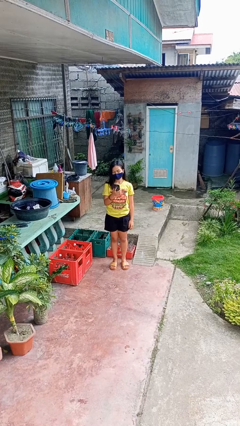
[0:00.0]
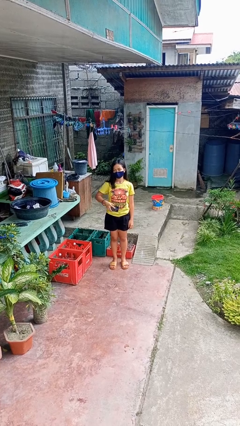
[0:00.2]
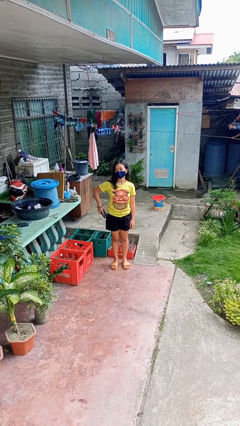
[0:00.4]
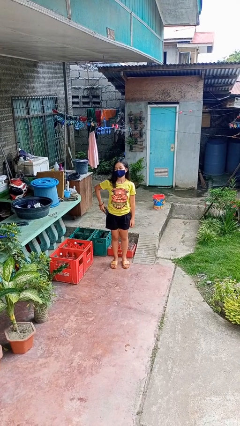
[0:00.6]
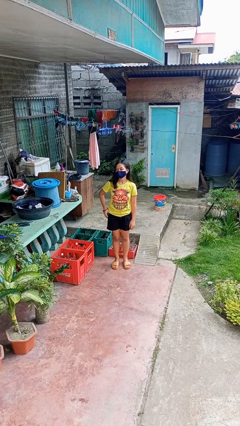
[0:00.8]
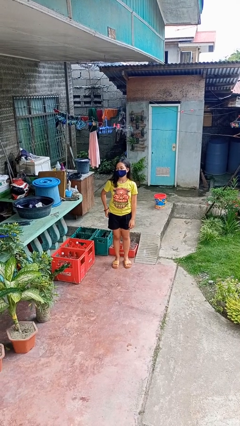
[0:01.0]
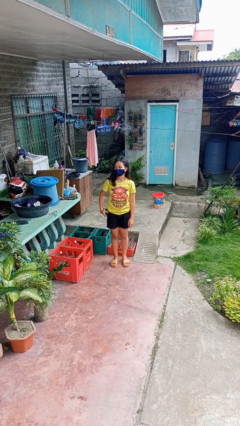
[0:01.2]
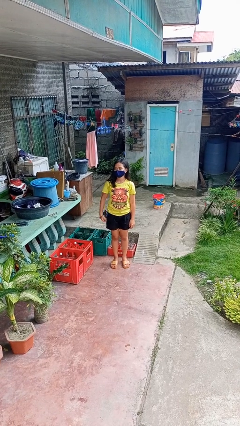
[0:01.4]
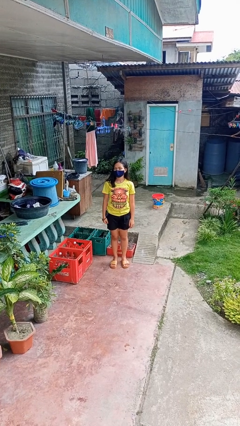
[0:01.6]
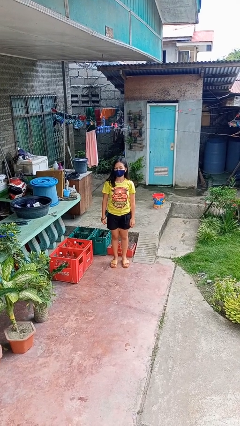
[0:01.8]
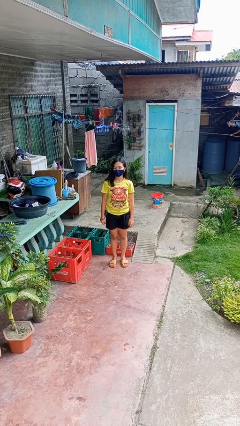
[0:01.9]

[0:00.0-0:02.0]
person puts phone into pocket

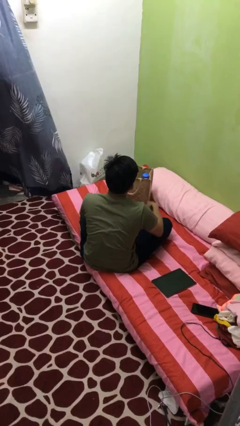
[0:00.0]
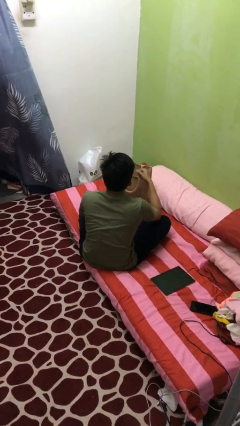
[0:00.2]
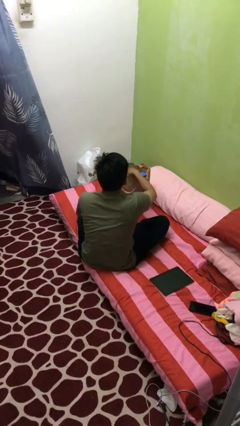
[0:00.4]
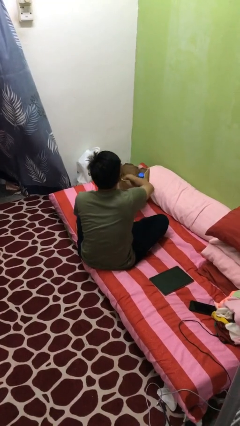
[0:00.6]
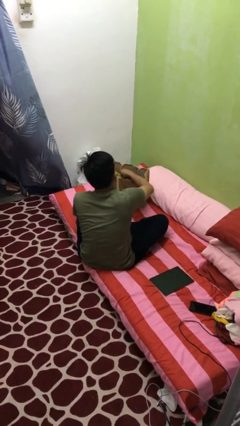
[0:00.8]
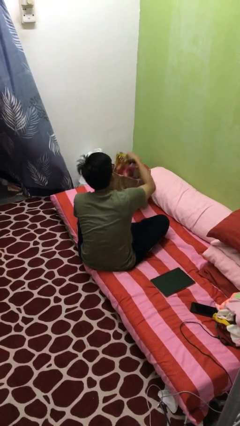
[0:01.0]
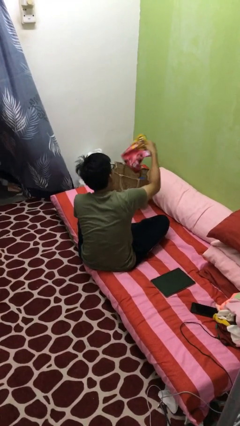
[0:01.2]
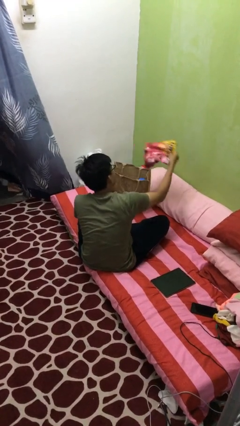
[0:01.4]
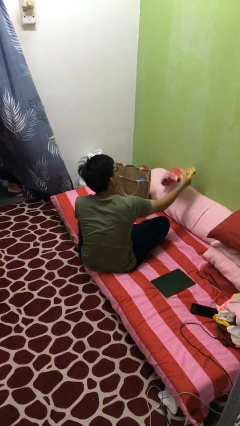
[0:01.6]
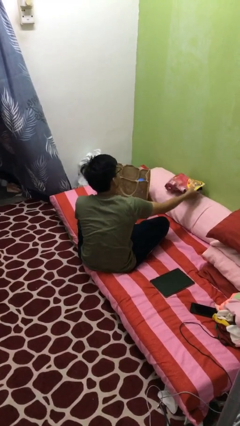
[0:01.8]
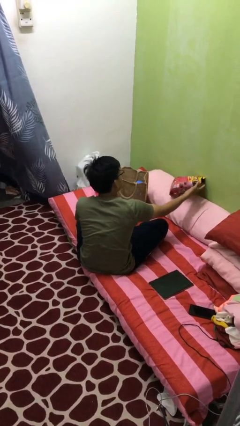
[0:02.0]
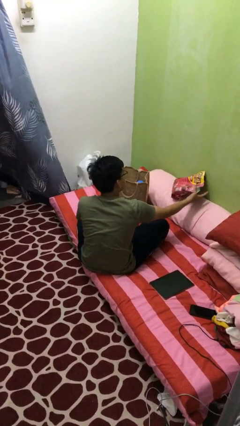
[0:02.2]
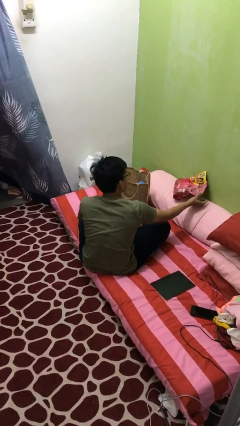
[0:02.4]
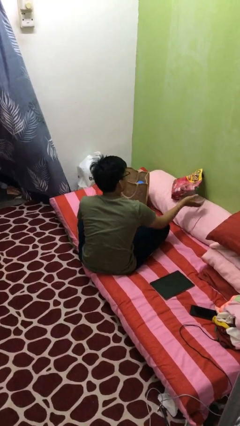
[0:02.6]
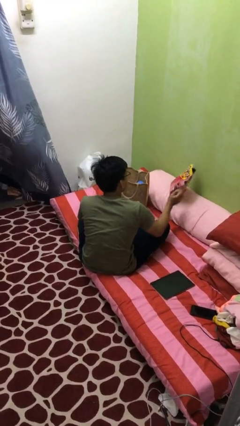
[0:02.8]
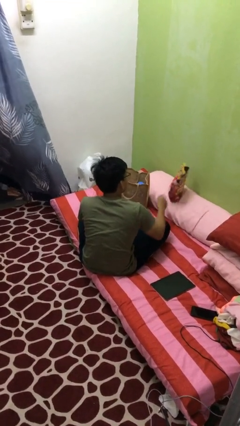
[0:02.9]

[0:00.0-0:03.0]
person takes object from bag

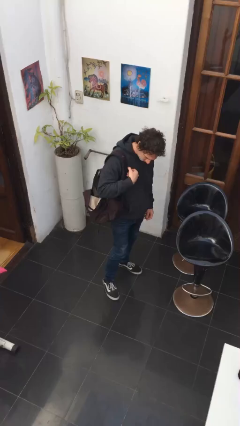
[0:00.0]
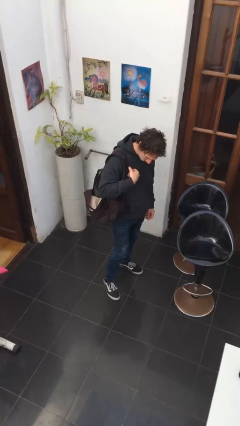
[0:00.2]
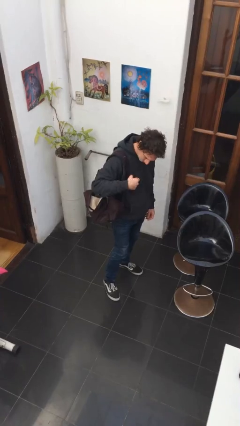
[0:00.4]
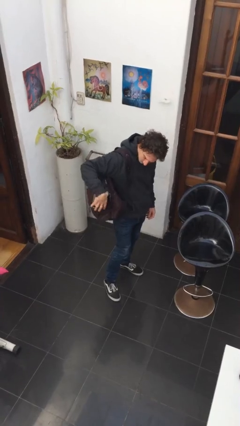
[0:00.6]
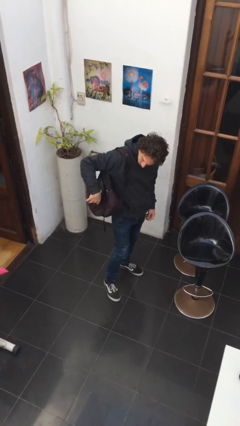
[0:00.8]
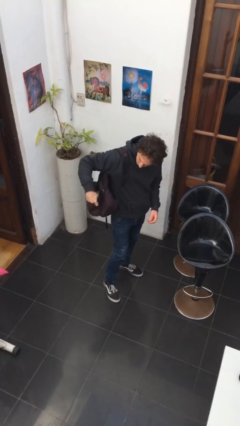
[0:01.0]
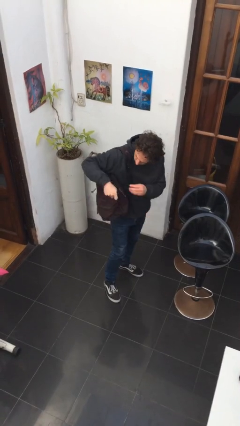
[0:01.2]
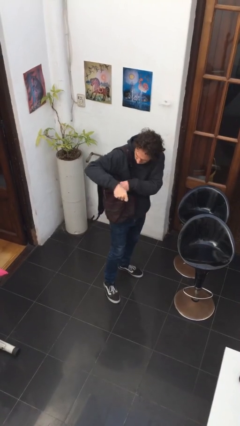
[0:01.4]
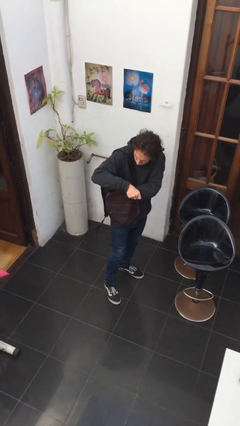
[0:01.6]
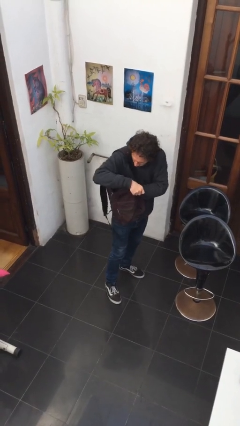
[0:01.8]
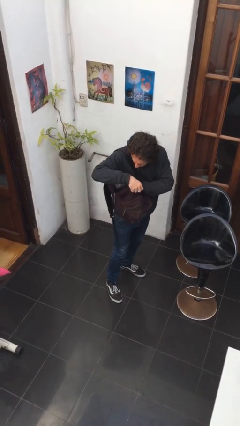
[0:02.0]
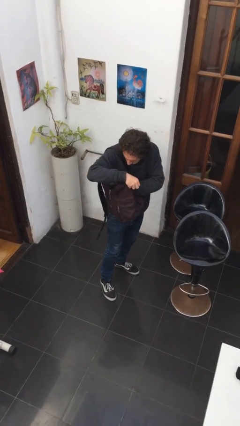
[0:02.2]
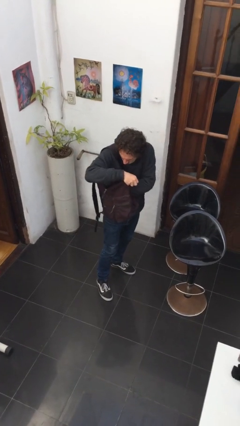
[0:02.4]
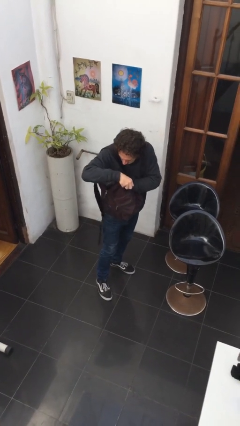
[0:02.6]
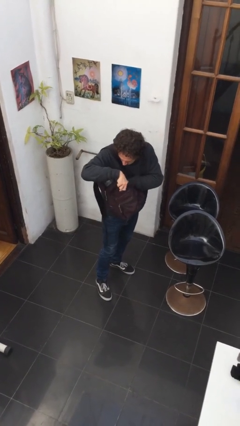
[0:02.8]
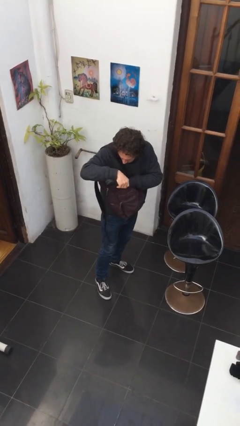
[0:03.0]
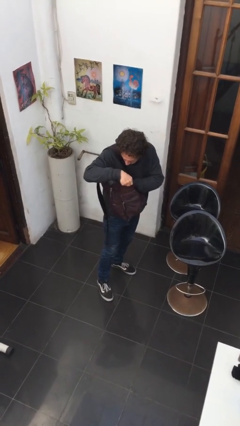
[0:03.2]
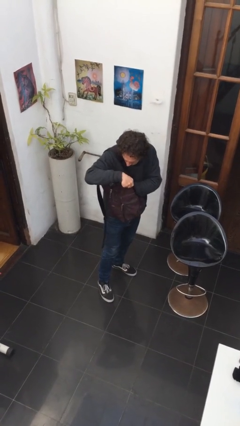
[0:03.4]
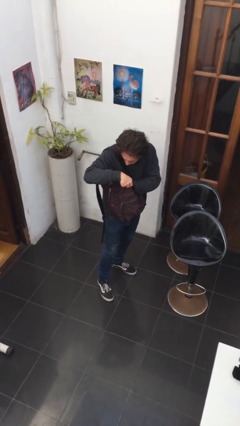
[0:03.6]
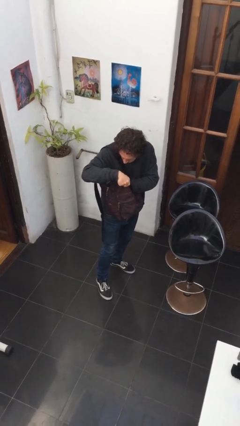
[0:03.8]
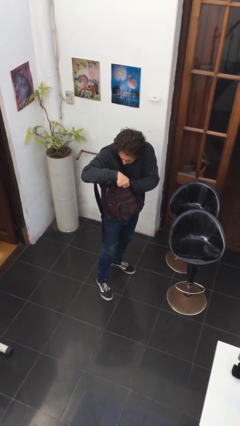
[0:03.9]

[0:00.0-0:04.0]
person searches in backpack

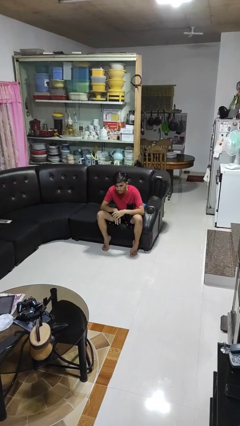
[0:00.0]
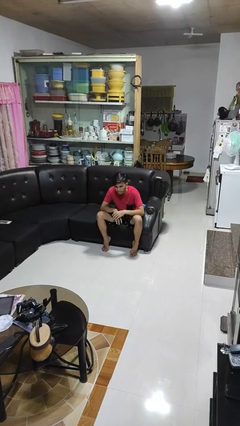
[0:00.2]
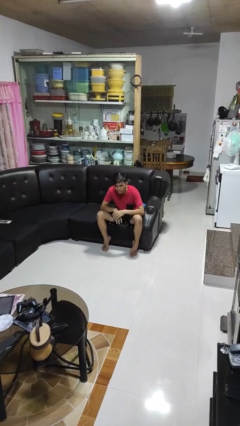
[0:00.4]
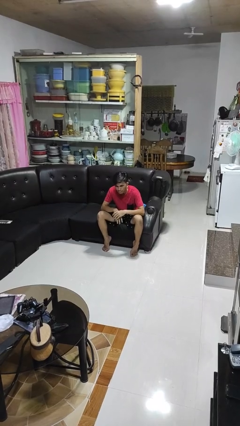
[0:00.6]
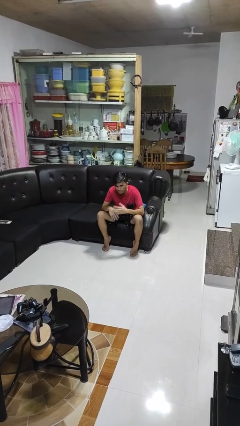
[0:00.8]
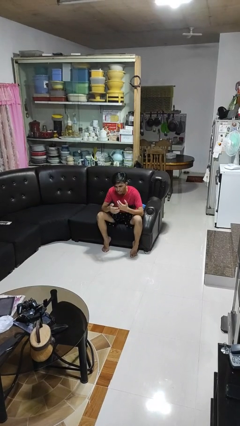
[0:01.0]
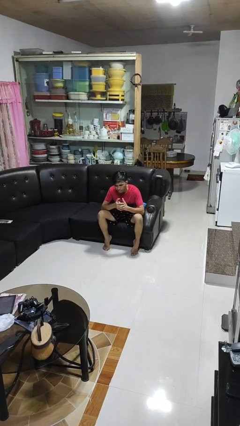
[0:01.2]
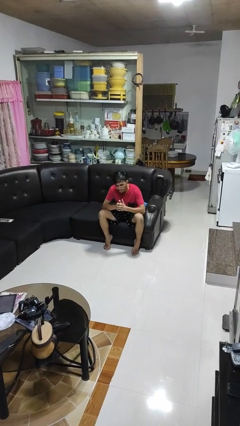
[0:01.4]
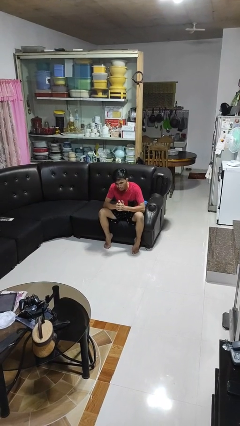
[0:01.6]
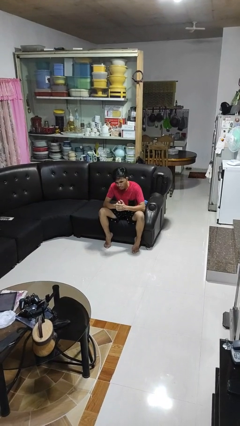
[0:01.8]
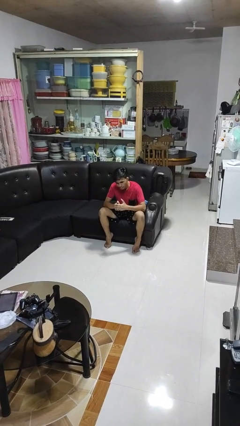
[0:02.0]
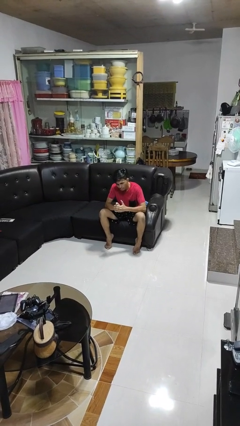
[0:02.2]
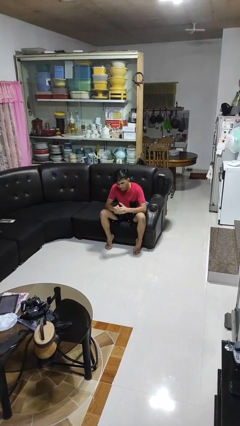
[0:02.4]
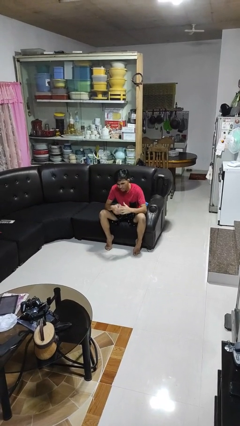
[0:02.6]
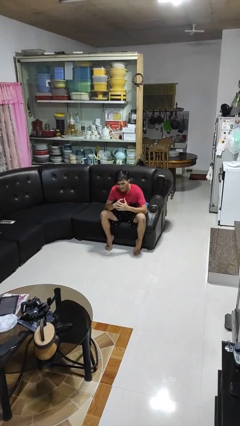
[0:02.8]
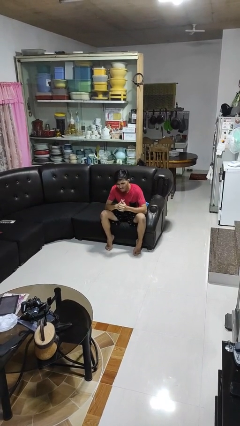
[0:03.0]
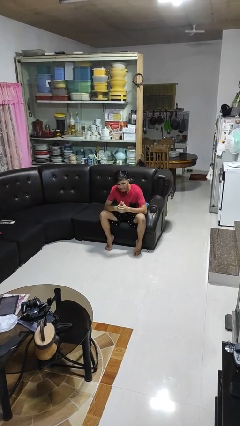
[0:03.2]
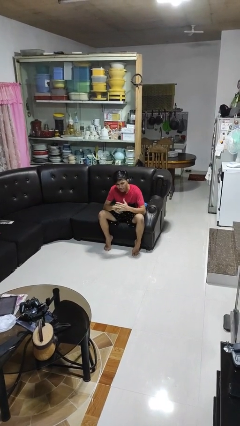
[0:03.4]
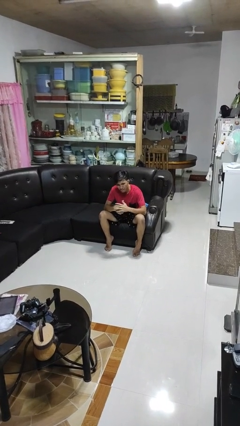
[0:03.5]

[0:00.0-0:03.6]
person cracks knuckles

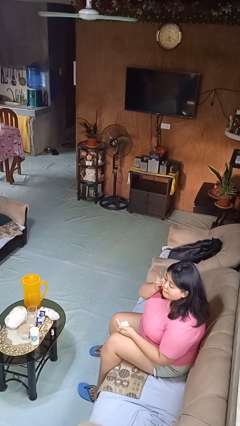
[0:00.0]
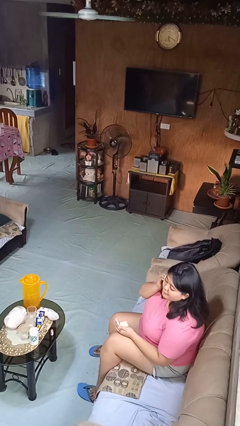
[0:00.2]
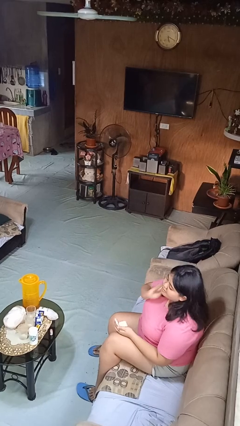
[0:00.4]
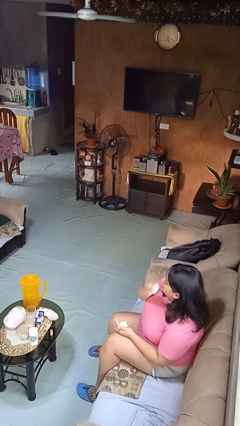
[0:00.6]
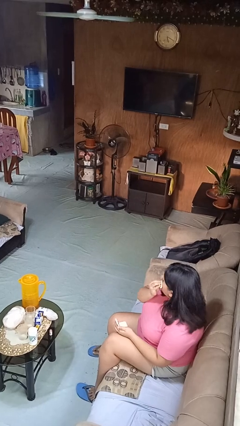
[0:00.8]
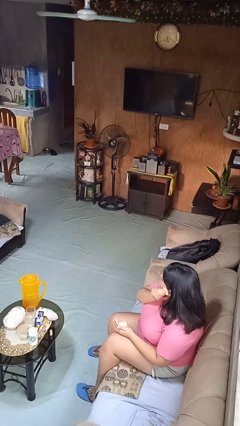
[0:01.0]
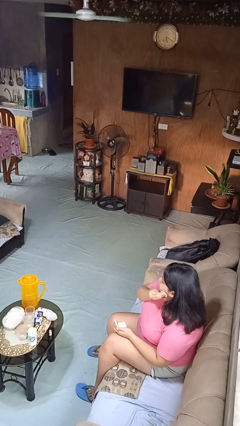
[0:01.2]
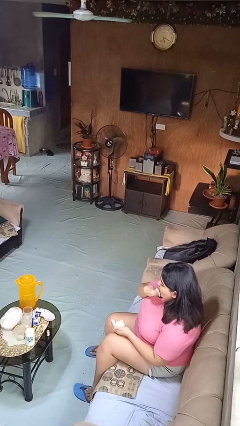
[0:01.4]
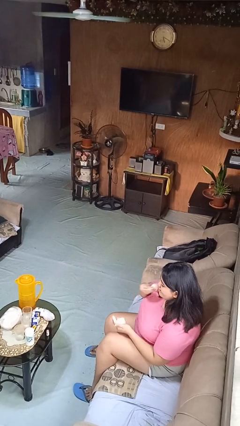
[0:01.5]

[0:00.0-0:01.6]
person applies foundation makeup

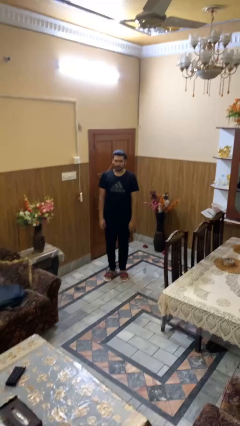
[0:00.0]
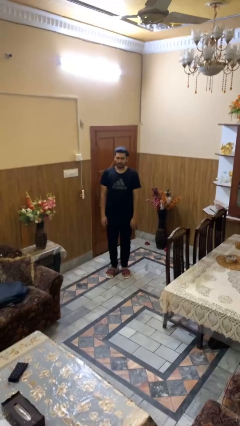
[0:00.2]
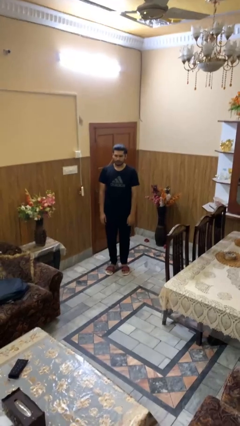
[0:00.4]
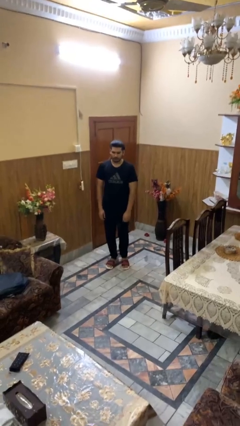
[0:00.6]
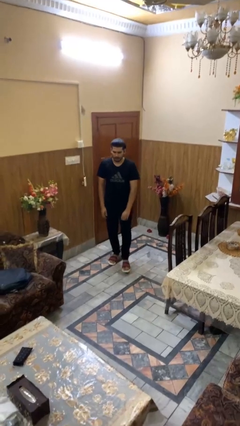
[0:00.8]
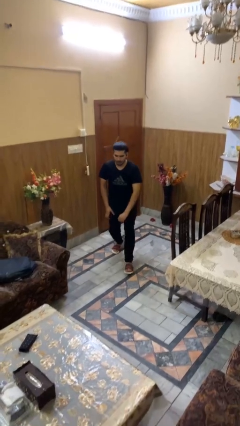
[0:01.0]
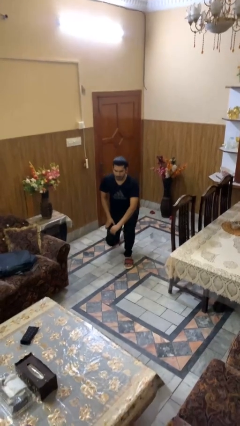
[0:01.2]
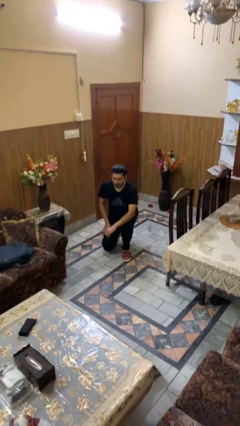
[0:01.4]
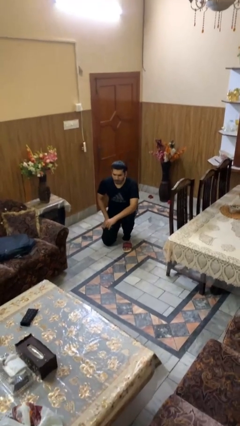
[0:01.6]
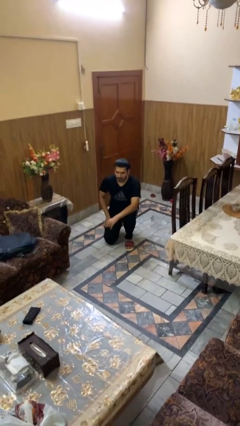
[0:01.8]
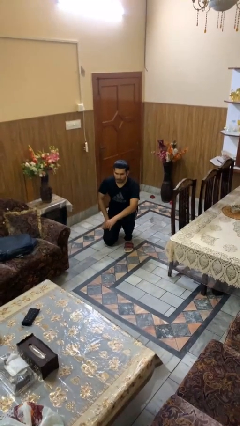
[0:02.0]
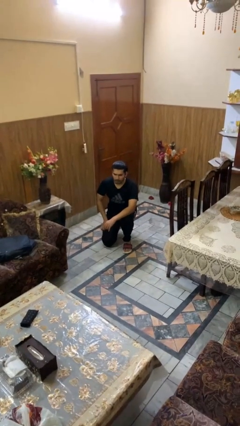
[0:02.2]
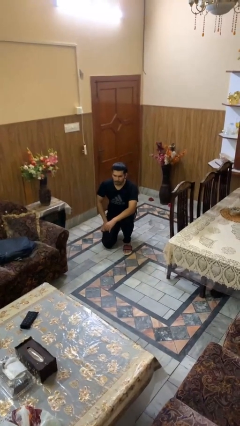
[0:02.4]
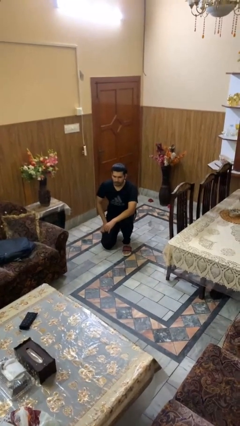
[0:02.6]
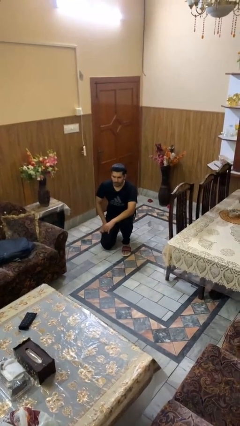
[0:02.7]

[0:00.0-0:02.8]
person kneels

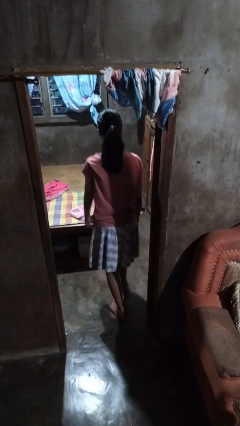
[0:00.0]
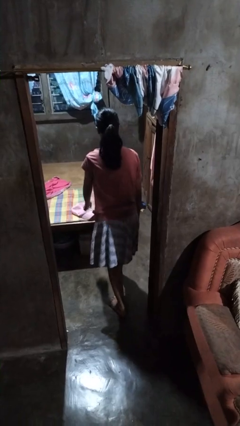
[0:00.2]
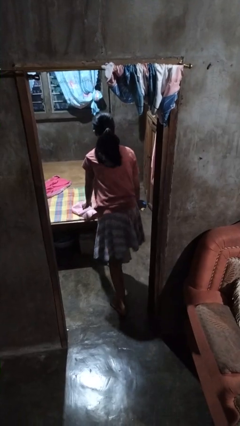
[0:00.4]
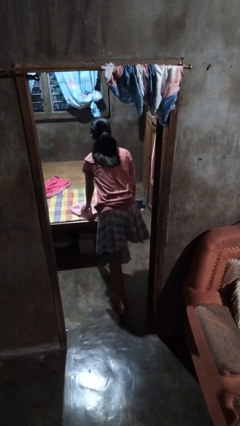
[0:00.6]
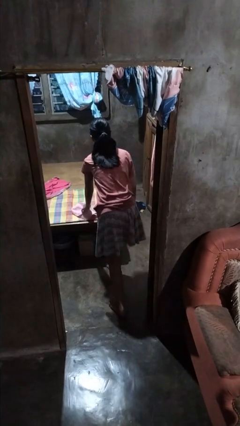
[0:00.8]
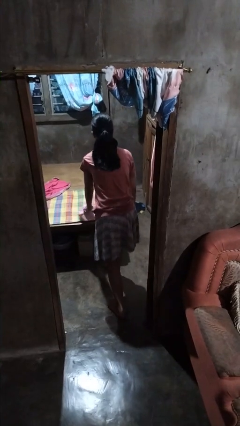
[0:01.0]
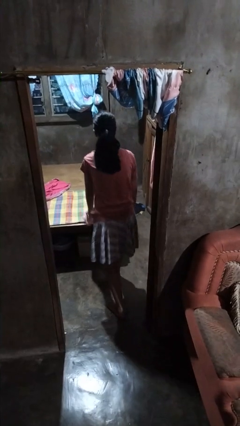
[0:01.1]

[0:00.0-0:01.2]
person picks up object from bed
